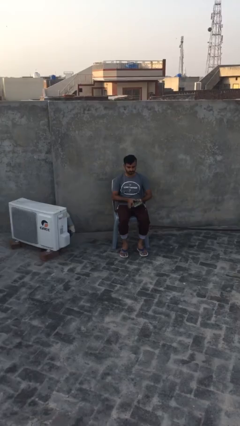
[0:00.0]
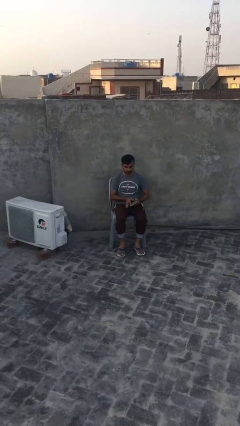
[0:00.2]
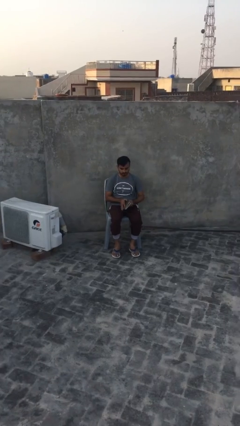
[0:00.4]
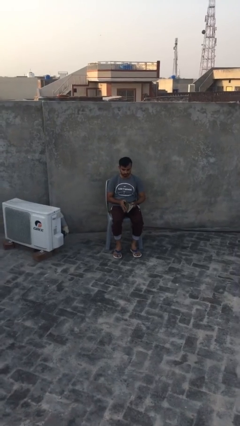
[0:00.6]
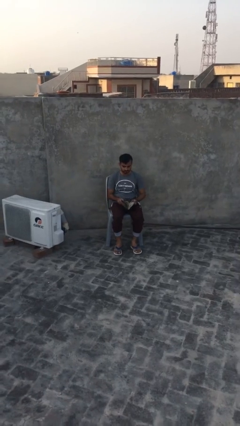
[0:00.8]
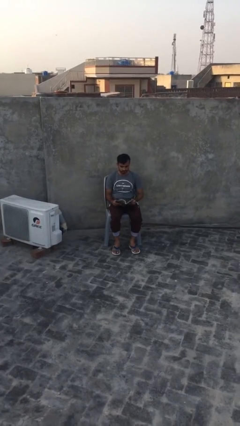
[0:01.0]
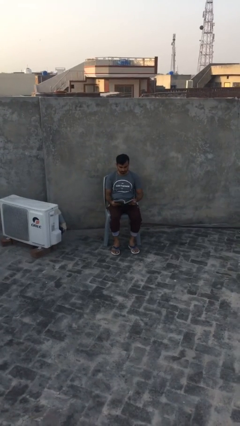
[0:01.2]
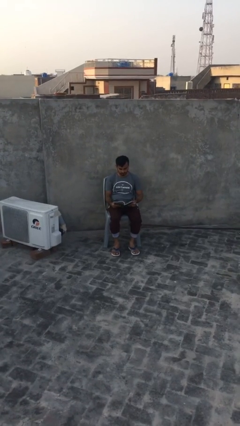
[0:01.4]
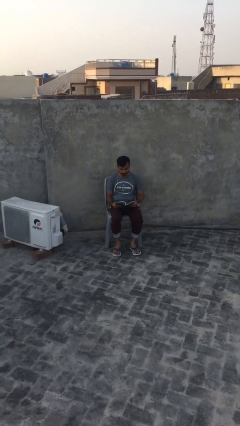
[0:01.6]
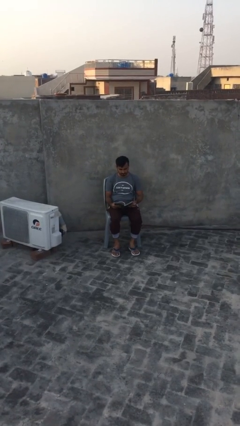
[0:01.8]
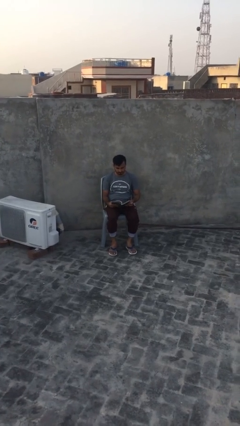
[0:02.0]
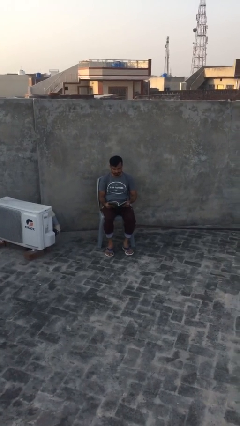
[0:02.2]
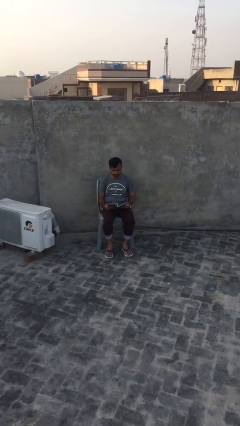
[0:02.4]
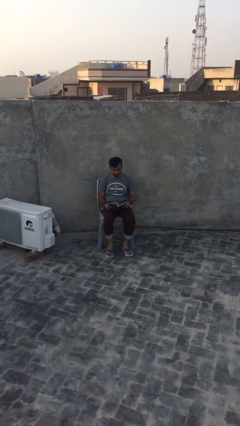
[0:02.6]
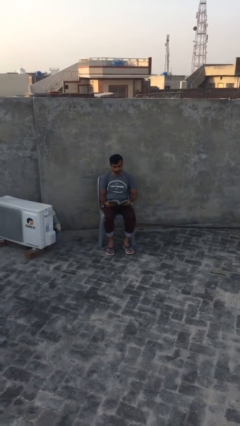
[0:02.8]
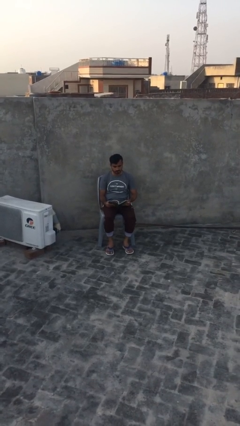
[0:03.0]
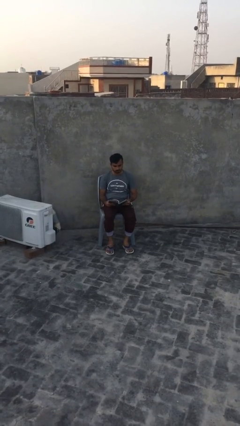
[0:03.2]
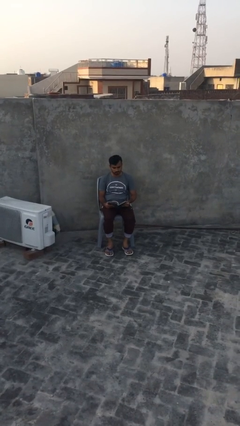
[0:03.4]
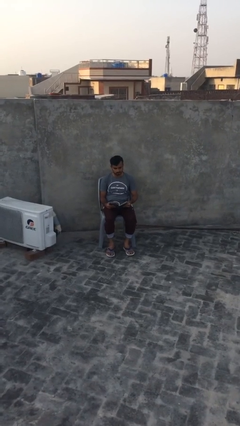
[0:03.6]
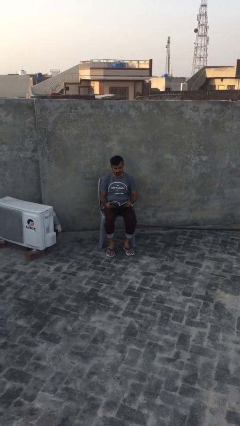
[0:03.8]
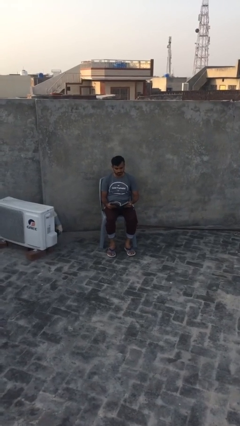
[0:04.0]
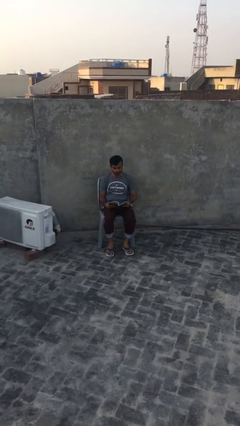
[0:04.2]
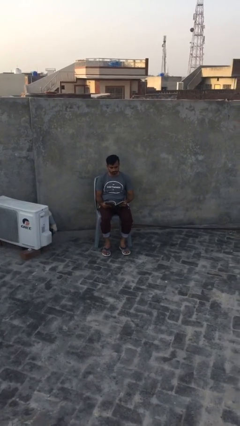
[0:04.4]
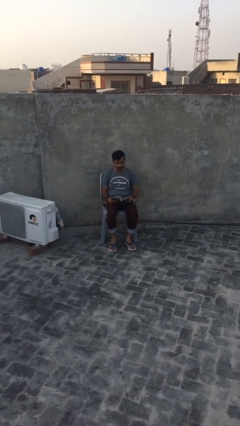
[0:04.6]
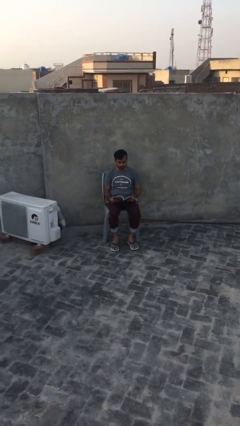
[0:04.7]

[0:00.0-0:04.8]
person reads document

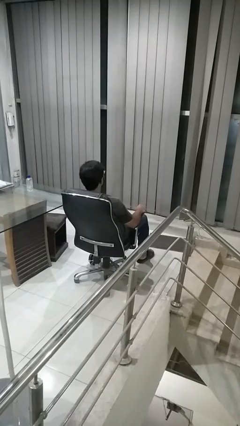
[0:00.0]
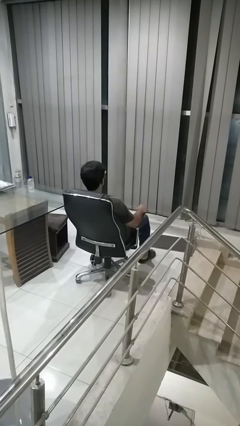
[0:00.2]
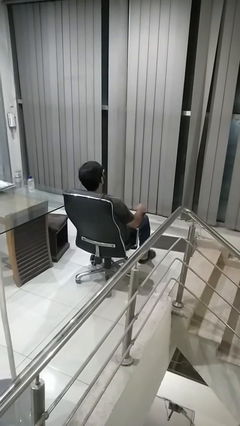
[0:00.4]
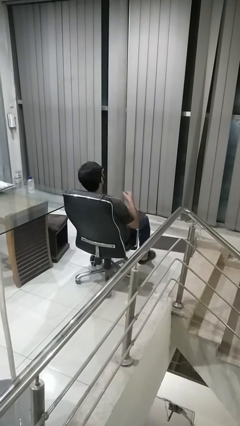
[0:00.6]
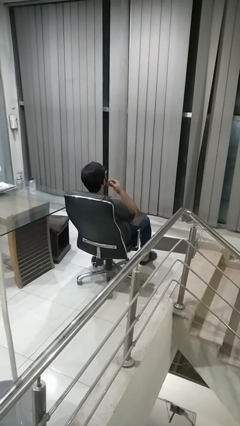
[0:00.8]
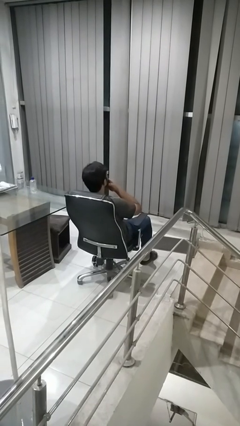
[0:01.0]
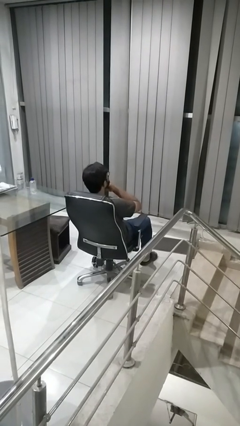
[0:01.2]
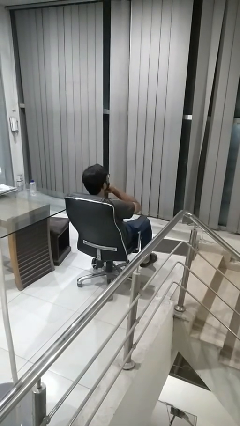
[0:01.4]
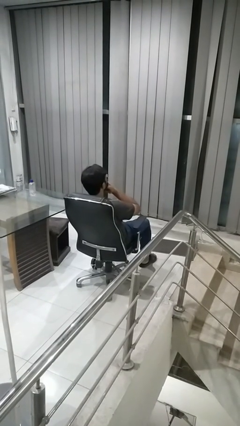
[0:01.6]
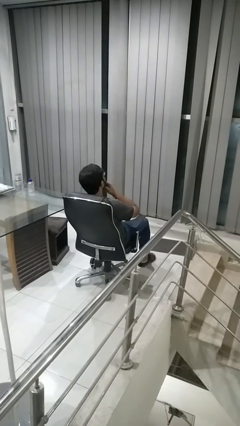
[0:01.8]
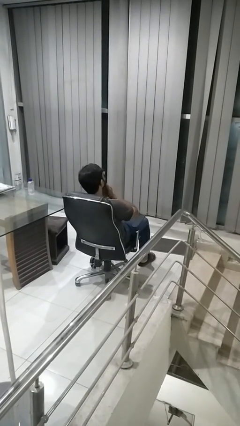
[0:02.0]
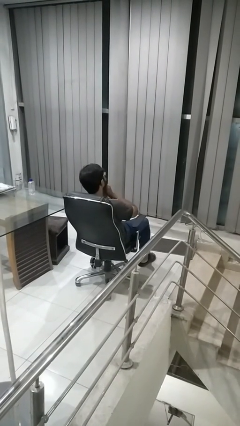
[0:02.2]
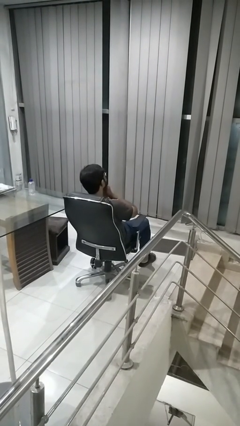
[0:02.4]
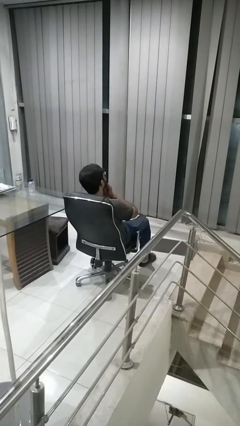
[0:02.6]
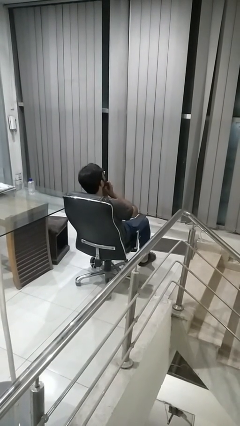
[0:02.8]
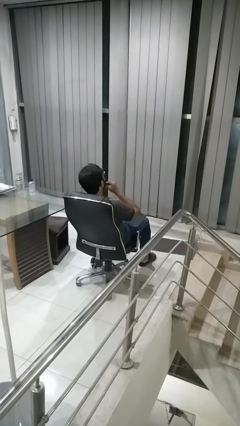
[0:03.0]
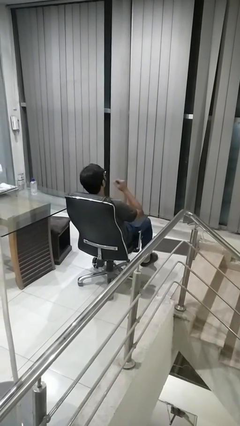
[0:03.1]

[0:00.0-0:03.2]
person strokes chin

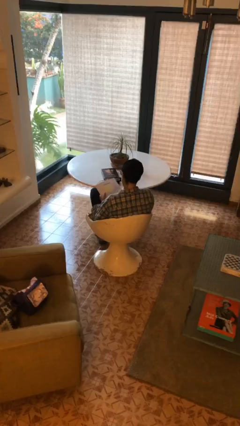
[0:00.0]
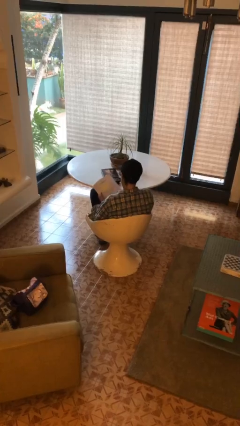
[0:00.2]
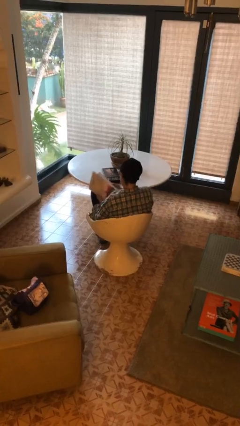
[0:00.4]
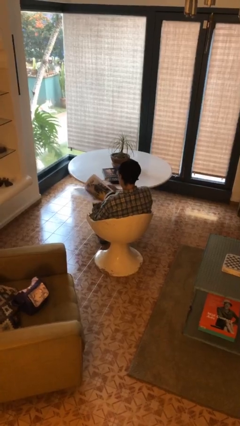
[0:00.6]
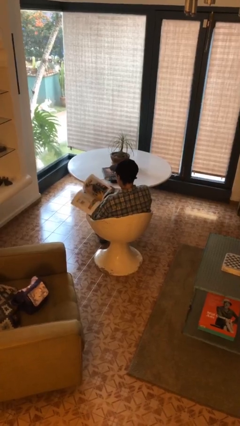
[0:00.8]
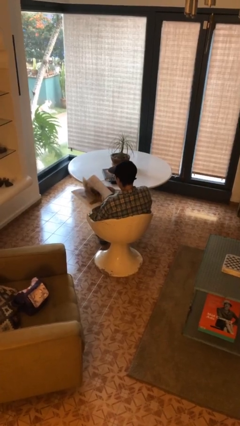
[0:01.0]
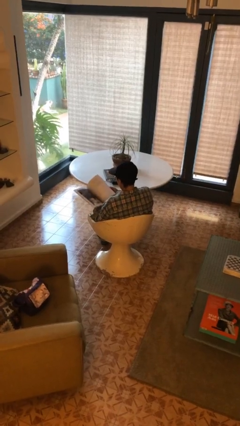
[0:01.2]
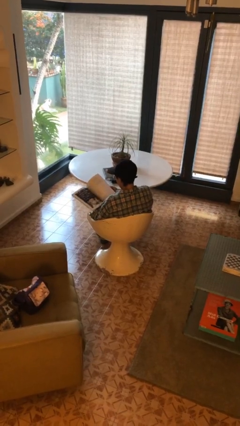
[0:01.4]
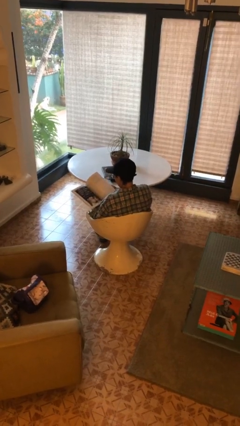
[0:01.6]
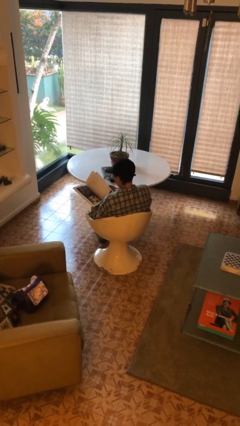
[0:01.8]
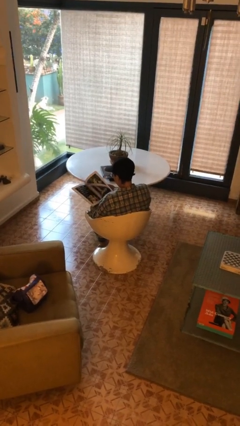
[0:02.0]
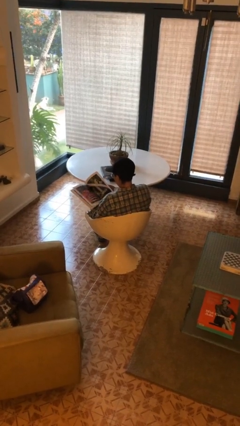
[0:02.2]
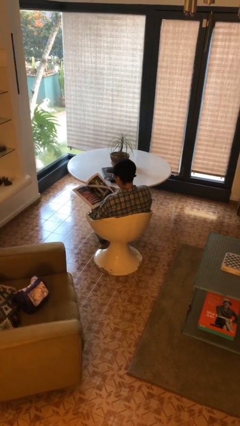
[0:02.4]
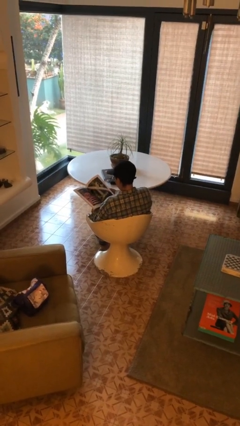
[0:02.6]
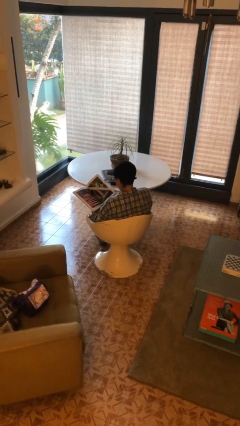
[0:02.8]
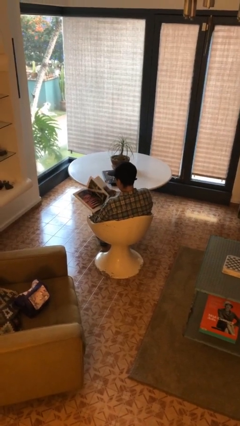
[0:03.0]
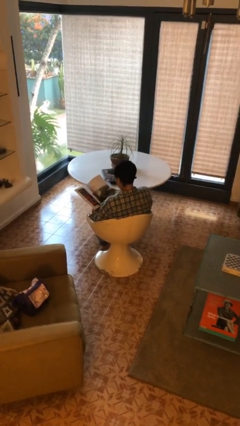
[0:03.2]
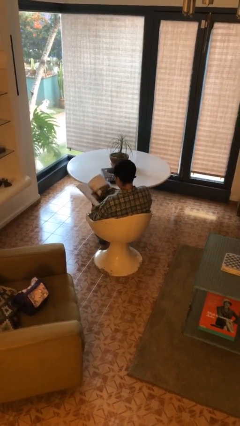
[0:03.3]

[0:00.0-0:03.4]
person reads magazine

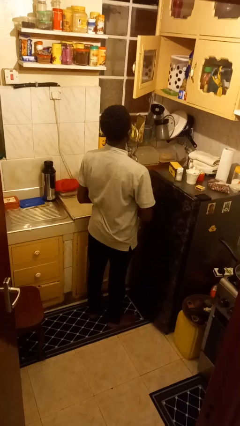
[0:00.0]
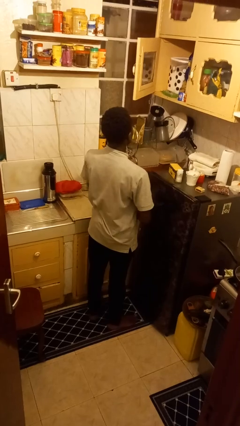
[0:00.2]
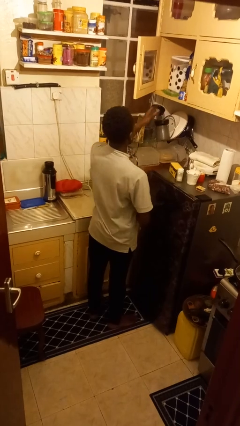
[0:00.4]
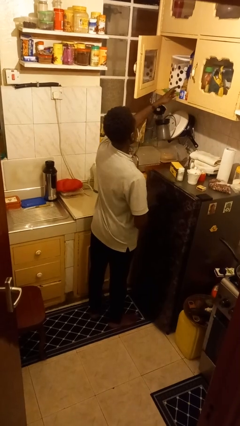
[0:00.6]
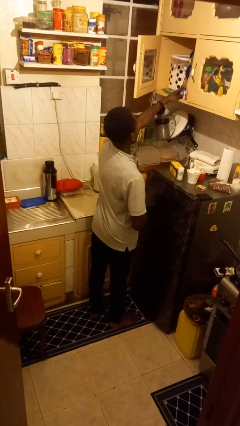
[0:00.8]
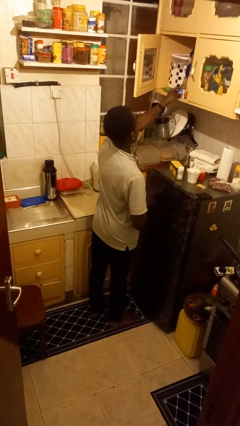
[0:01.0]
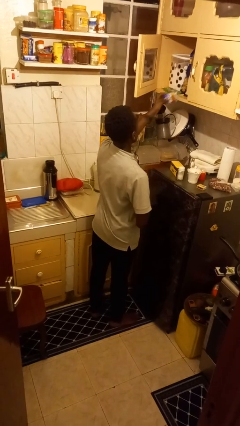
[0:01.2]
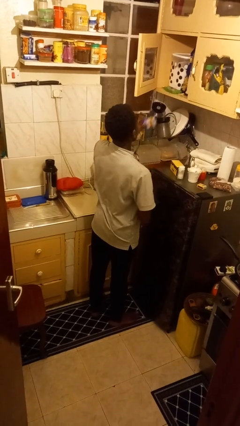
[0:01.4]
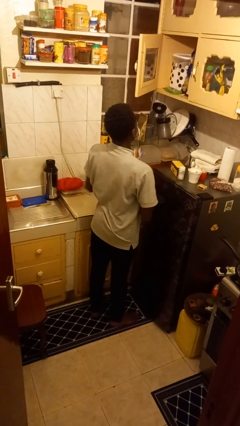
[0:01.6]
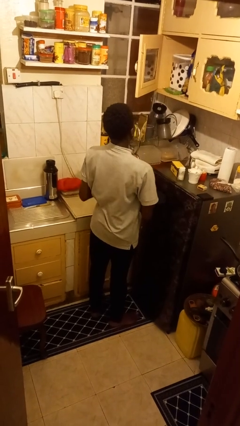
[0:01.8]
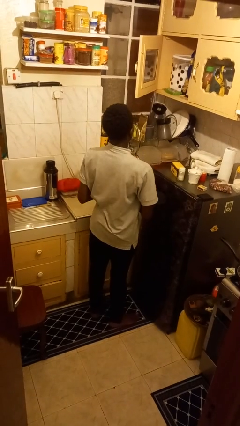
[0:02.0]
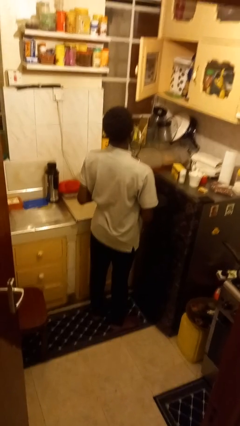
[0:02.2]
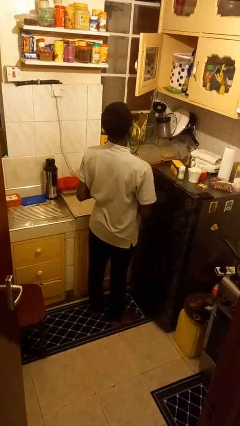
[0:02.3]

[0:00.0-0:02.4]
person picks up object from cabinet

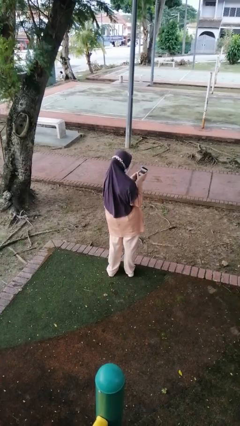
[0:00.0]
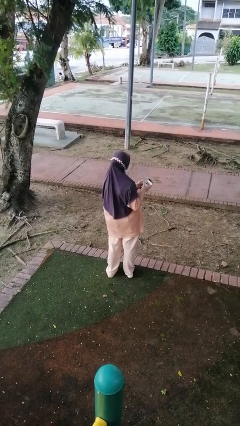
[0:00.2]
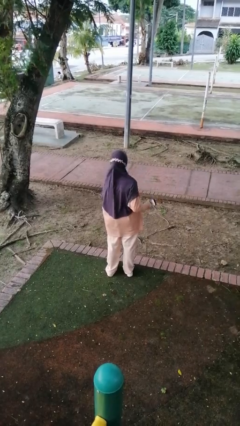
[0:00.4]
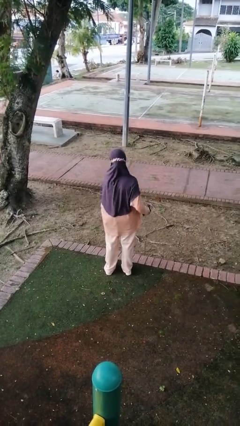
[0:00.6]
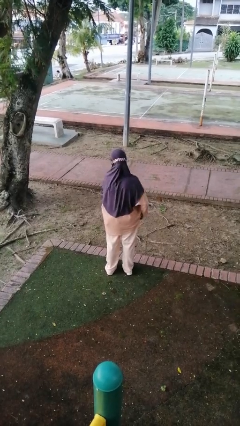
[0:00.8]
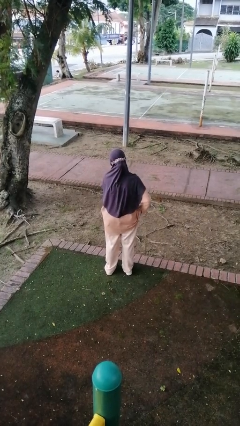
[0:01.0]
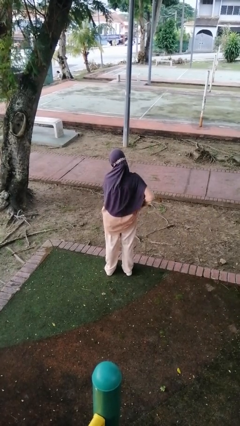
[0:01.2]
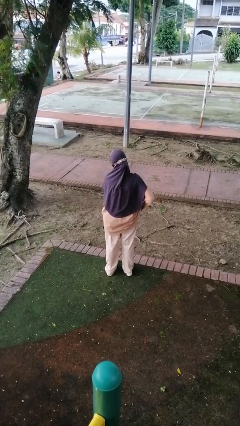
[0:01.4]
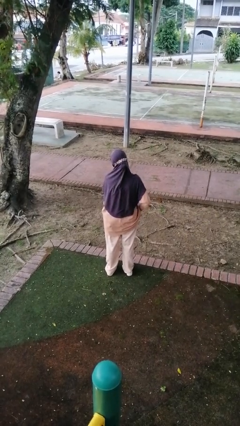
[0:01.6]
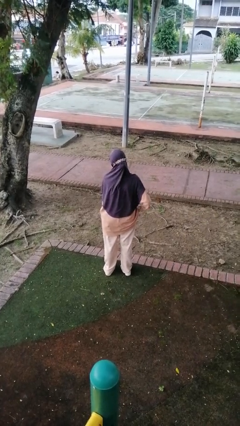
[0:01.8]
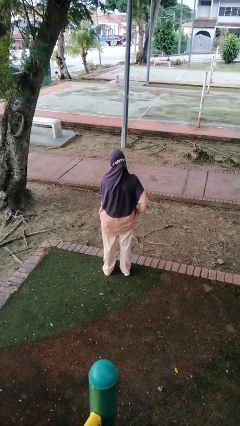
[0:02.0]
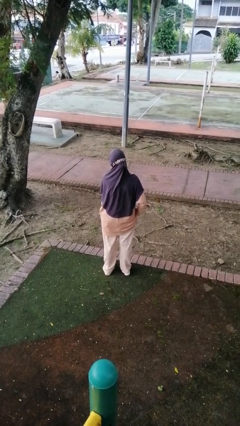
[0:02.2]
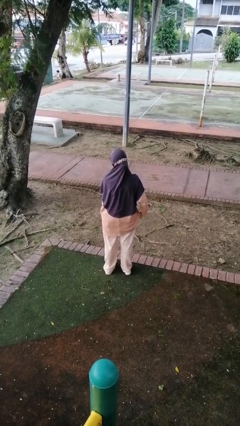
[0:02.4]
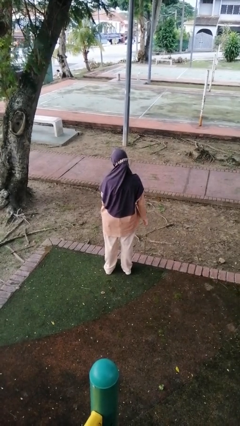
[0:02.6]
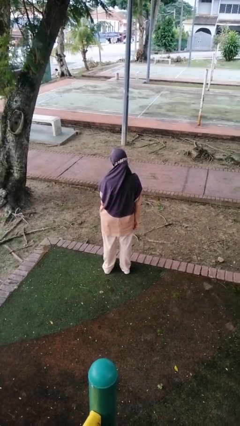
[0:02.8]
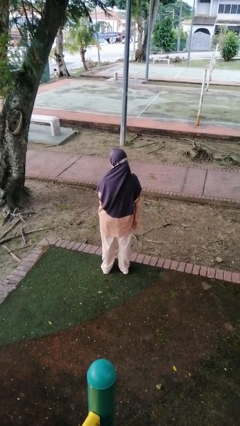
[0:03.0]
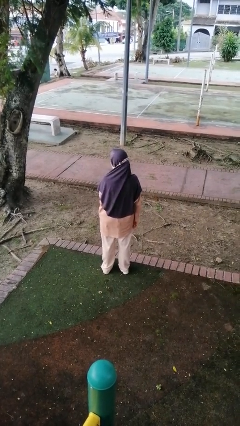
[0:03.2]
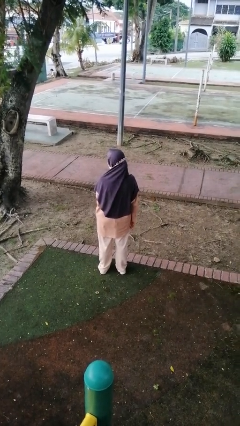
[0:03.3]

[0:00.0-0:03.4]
person puts phone into pocket
